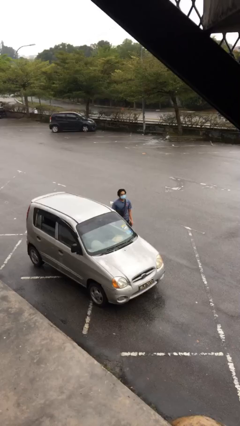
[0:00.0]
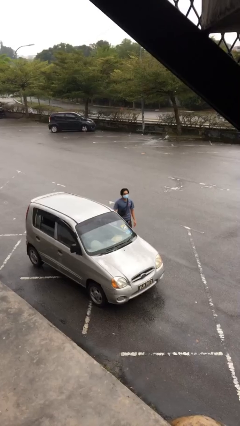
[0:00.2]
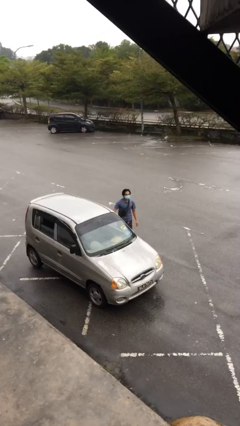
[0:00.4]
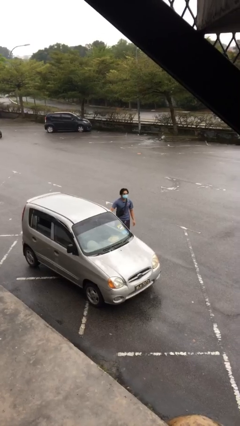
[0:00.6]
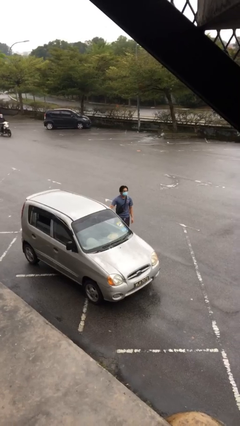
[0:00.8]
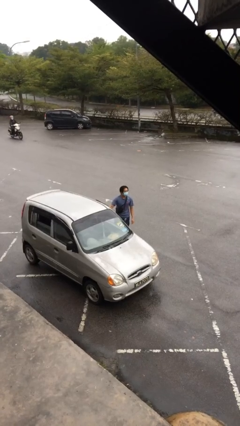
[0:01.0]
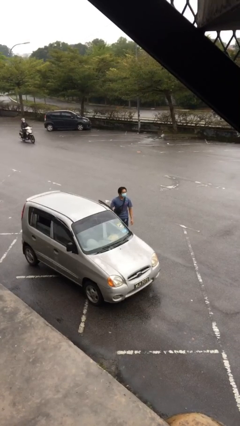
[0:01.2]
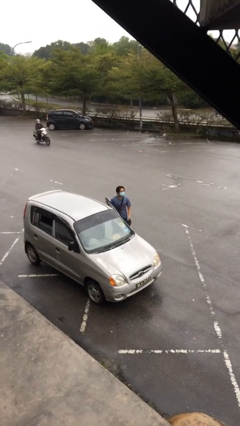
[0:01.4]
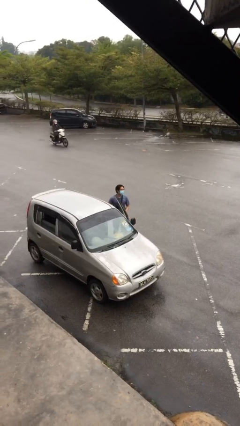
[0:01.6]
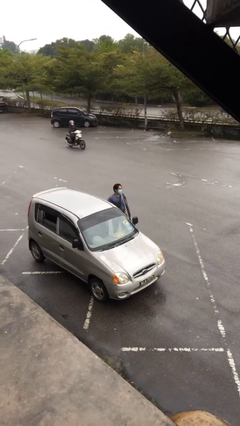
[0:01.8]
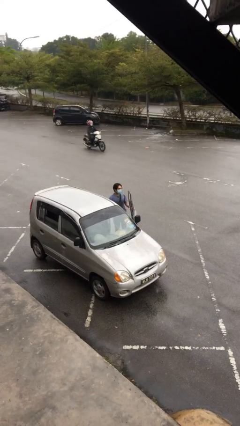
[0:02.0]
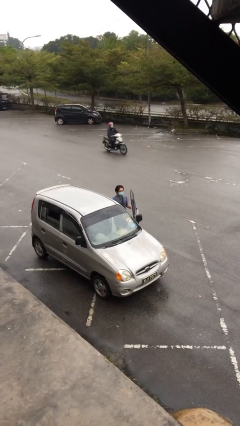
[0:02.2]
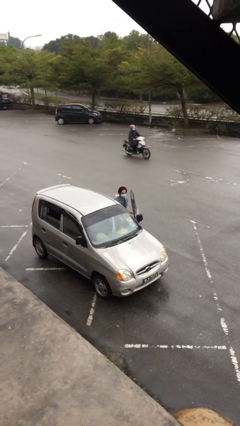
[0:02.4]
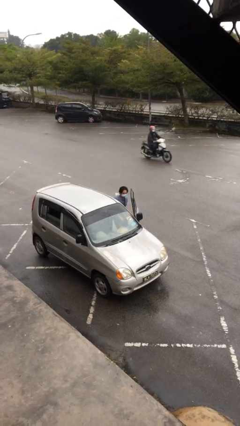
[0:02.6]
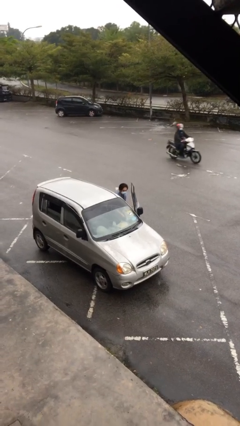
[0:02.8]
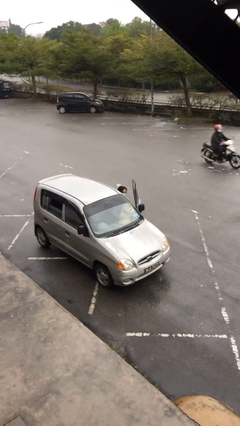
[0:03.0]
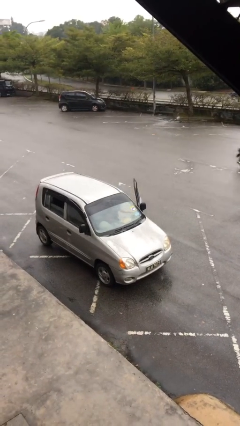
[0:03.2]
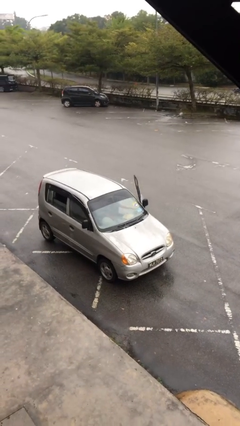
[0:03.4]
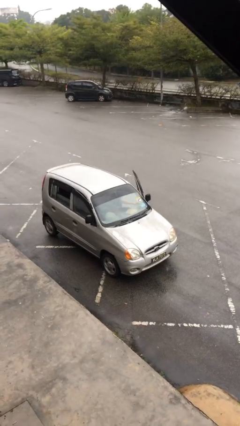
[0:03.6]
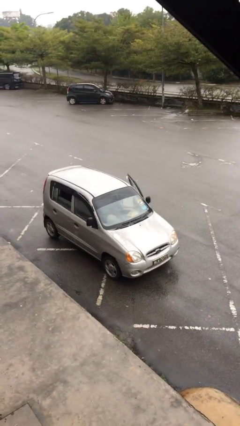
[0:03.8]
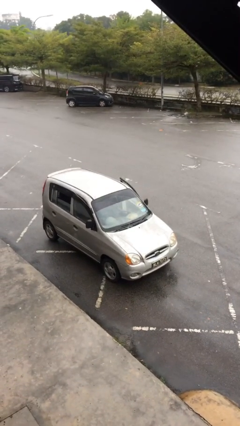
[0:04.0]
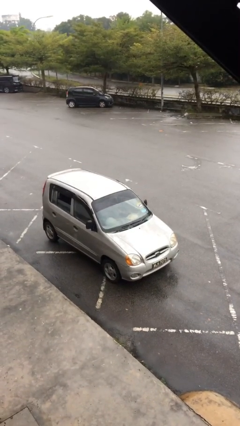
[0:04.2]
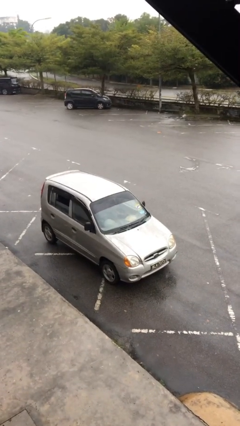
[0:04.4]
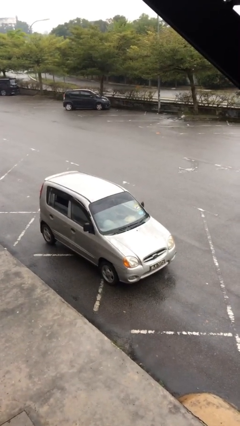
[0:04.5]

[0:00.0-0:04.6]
person enters car

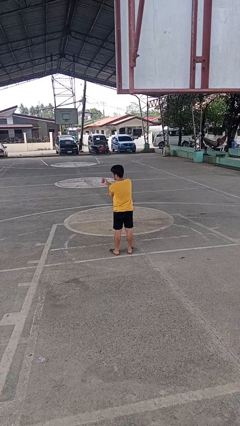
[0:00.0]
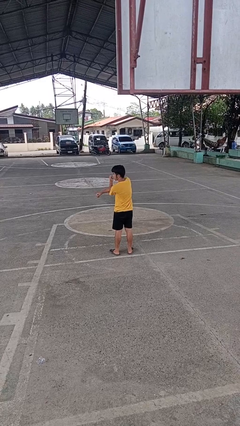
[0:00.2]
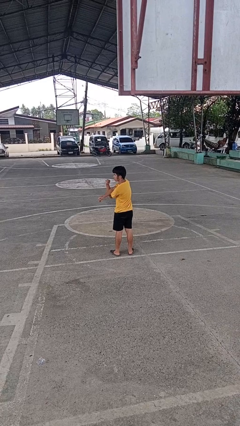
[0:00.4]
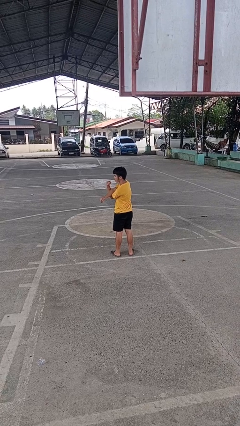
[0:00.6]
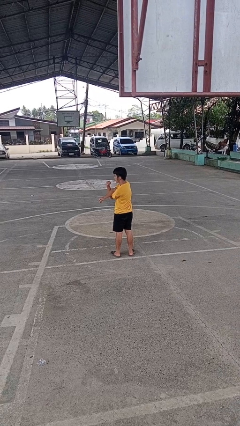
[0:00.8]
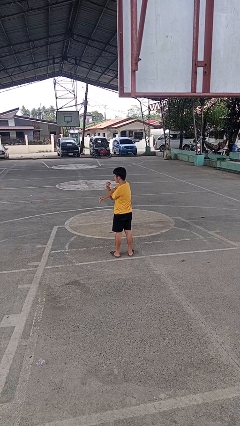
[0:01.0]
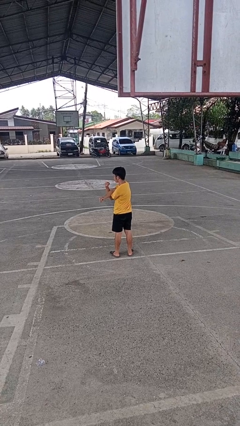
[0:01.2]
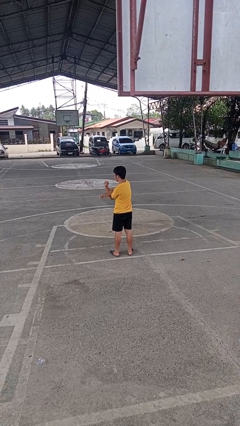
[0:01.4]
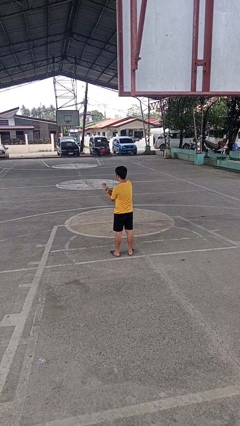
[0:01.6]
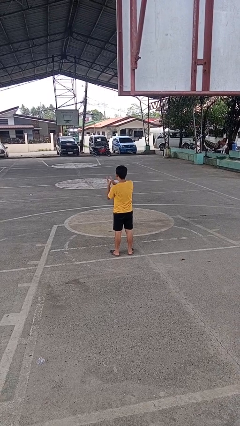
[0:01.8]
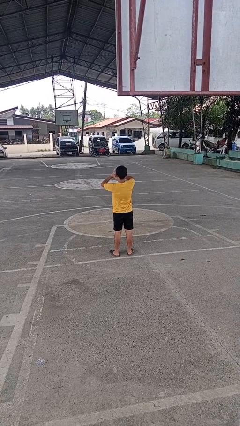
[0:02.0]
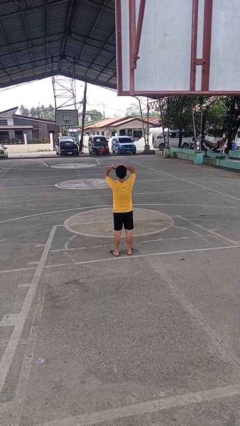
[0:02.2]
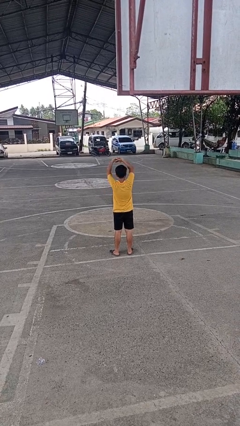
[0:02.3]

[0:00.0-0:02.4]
person stretches arms to side

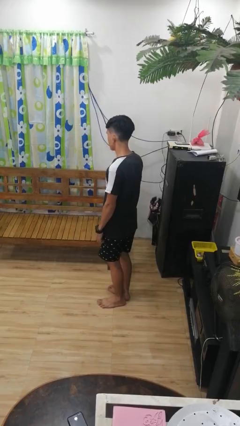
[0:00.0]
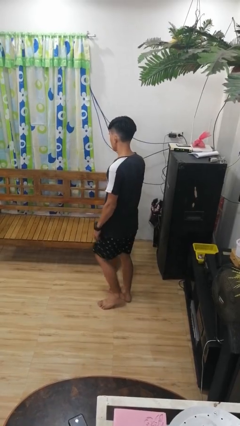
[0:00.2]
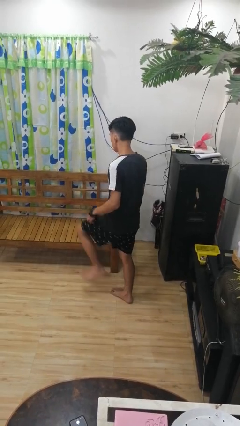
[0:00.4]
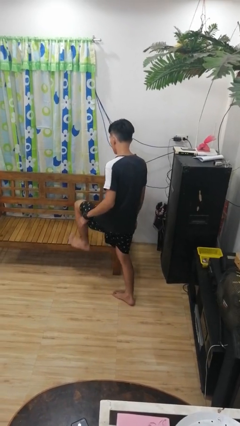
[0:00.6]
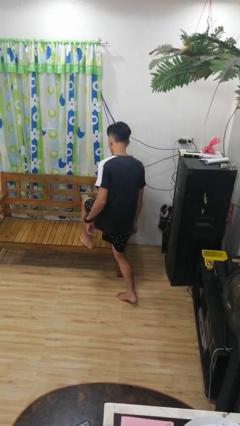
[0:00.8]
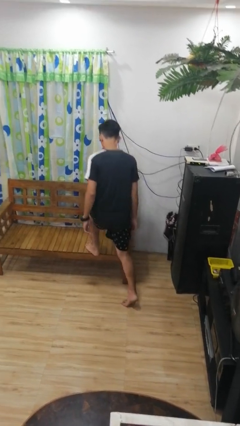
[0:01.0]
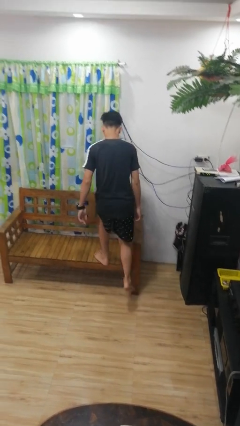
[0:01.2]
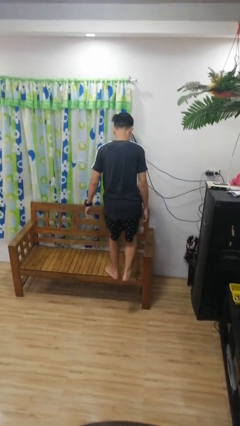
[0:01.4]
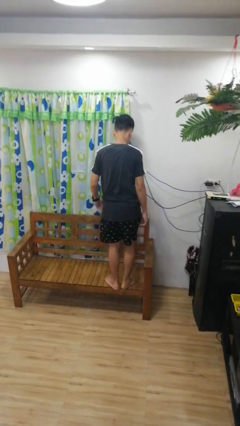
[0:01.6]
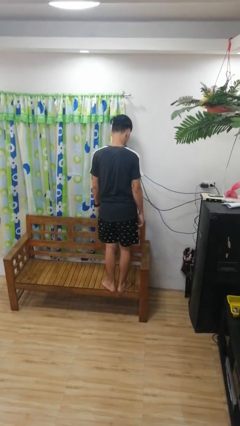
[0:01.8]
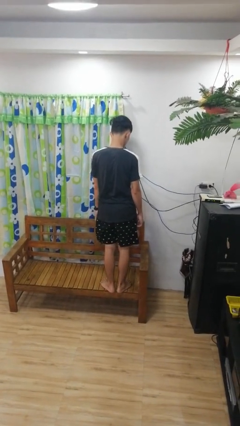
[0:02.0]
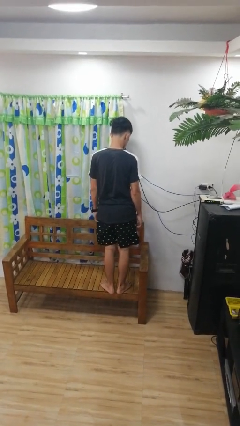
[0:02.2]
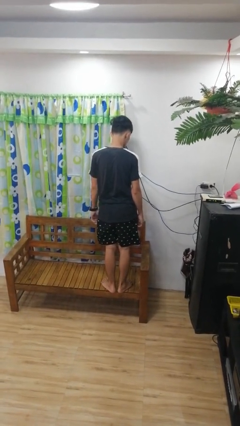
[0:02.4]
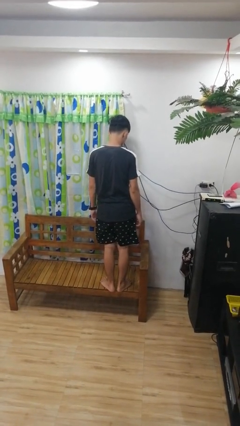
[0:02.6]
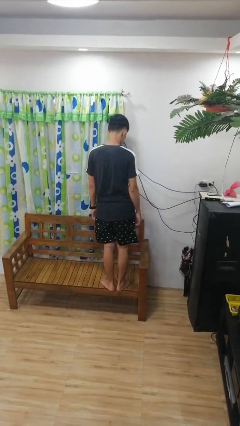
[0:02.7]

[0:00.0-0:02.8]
person climbs on couch

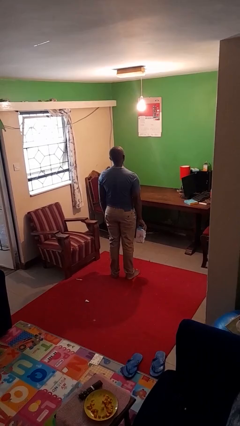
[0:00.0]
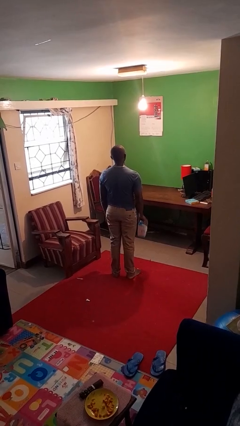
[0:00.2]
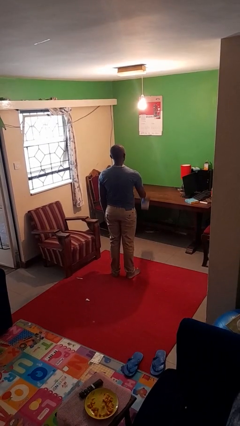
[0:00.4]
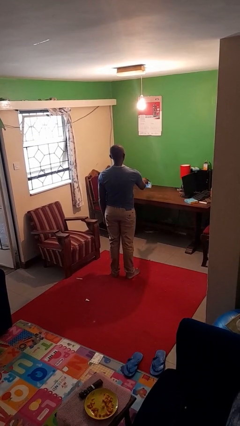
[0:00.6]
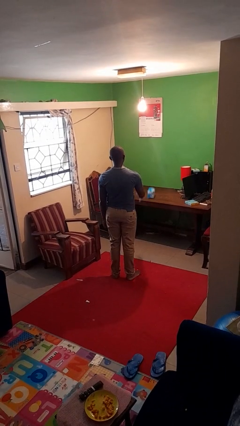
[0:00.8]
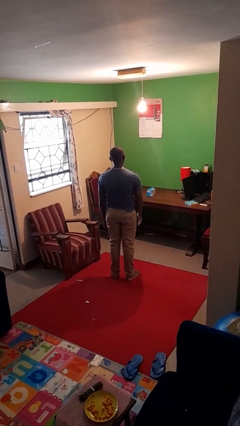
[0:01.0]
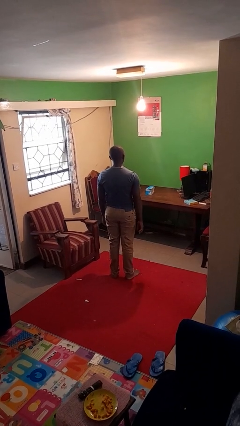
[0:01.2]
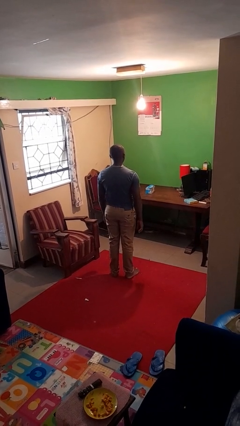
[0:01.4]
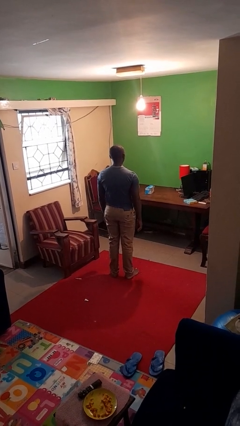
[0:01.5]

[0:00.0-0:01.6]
person throws object on table

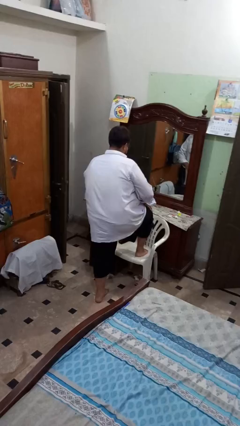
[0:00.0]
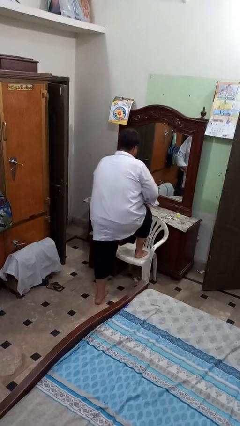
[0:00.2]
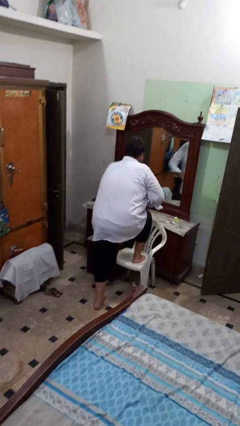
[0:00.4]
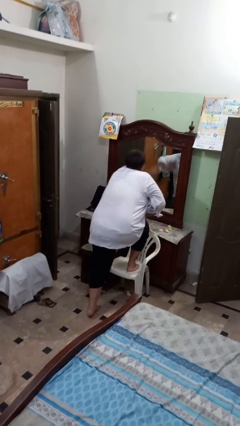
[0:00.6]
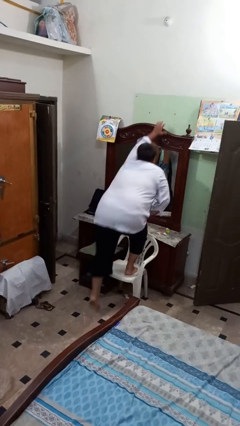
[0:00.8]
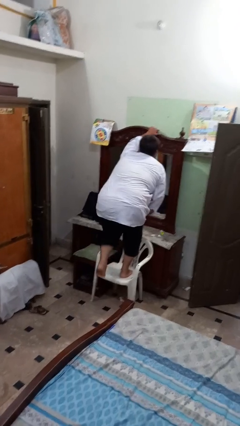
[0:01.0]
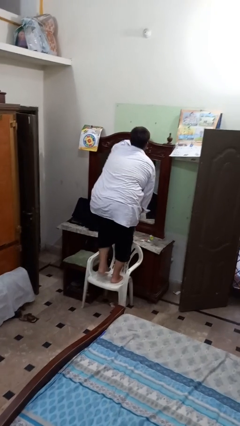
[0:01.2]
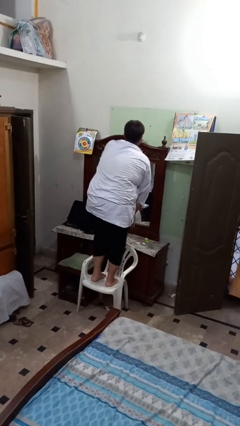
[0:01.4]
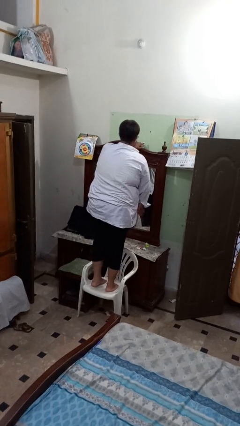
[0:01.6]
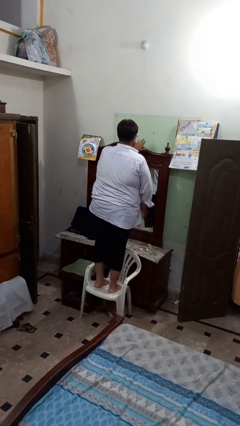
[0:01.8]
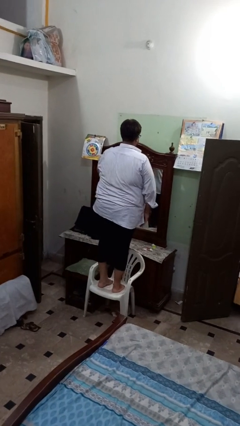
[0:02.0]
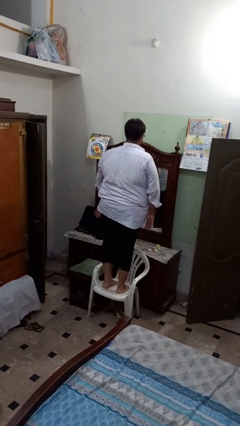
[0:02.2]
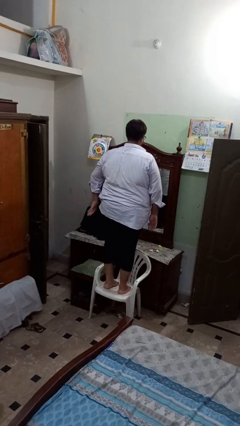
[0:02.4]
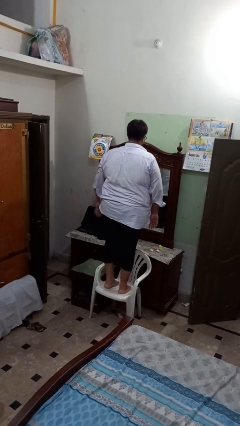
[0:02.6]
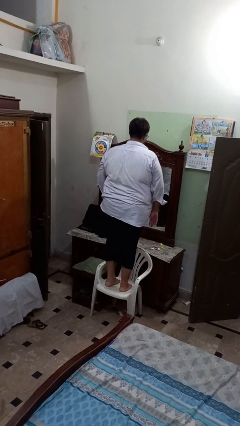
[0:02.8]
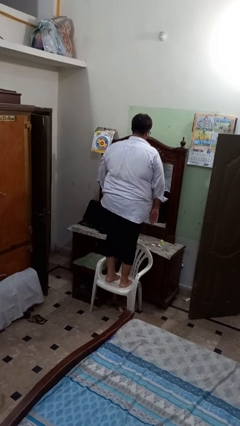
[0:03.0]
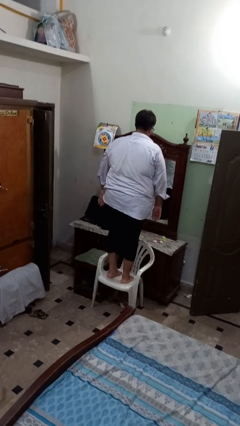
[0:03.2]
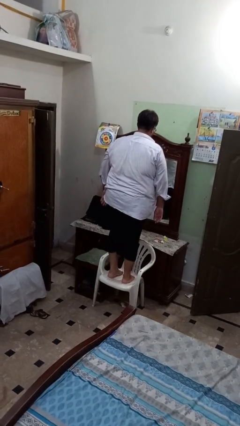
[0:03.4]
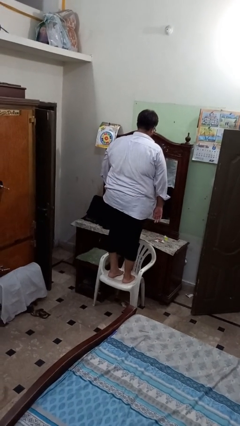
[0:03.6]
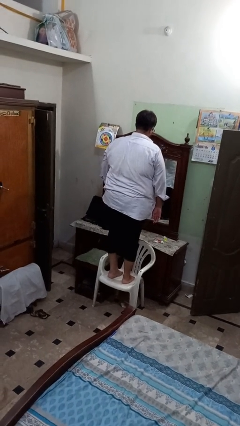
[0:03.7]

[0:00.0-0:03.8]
person climbs on chair

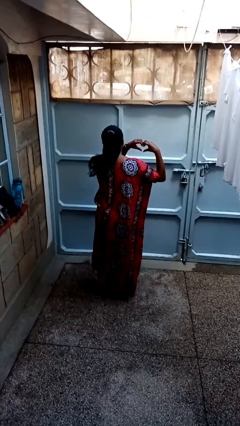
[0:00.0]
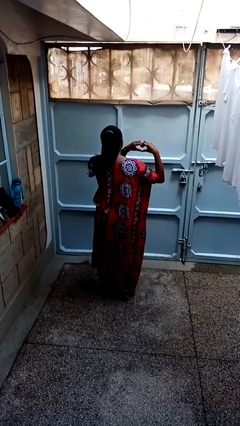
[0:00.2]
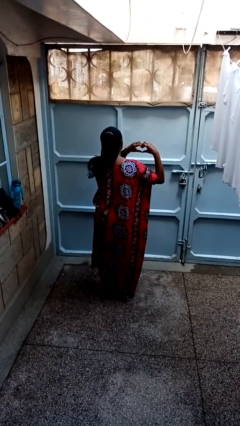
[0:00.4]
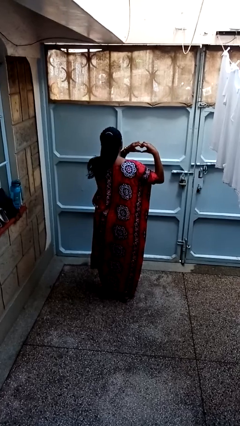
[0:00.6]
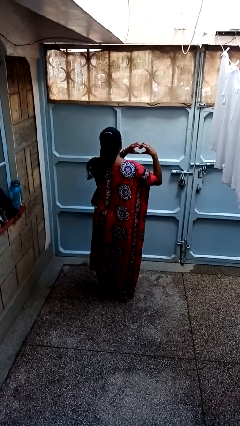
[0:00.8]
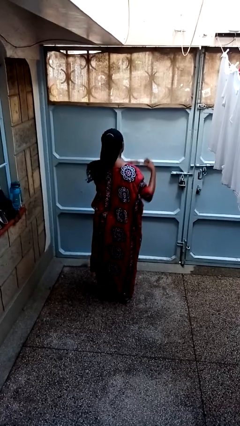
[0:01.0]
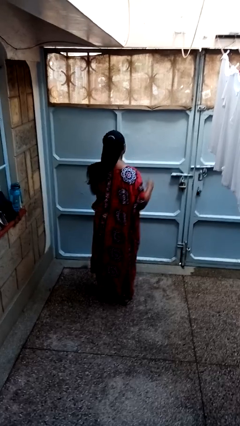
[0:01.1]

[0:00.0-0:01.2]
person gestures heart

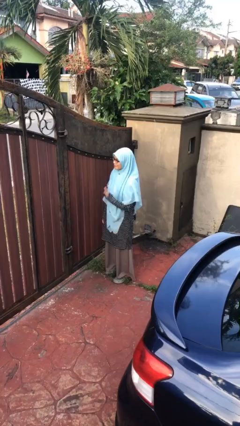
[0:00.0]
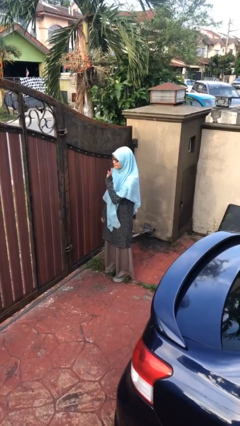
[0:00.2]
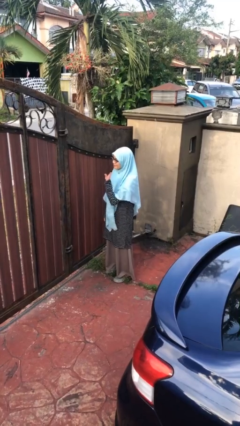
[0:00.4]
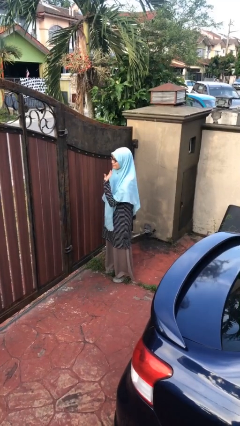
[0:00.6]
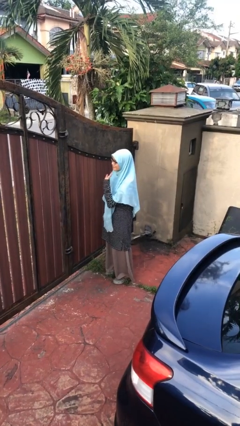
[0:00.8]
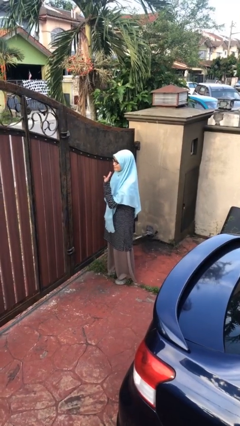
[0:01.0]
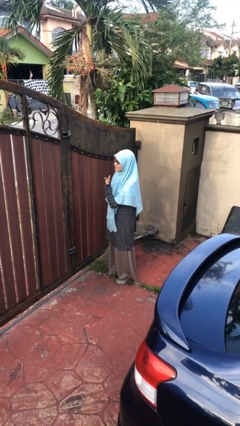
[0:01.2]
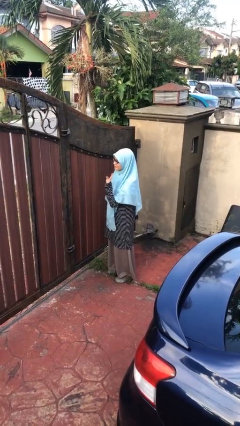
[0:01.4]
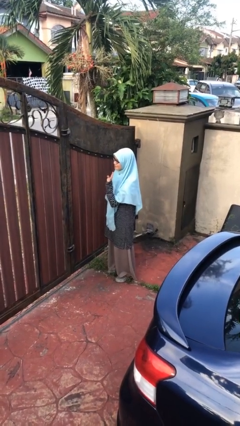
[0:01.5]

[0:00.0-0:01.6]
person waves at person
